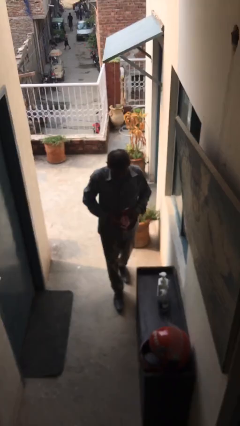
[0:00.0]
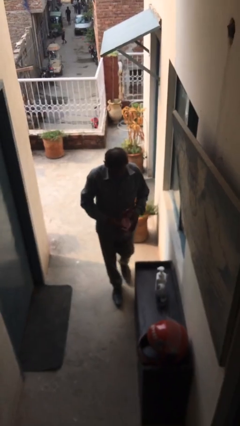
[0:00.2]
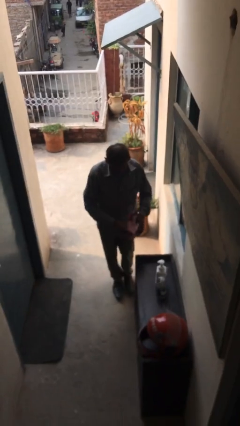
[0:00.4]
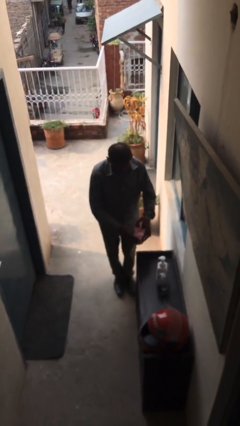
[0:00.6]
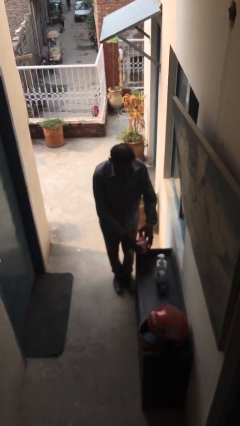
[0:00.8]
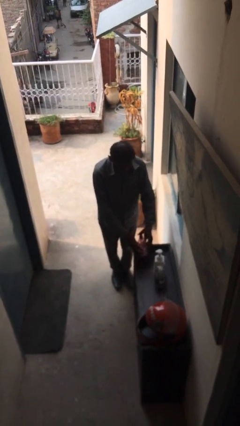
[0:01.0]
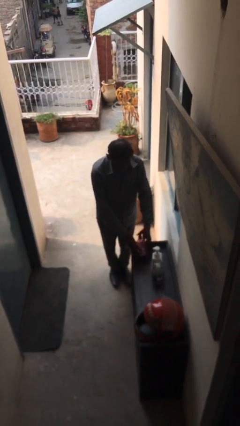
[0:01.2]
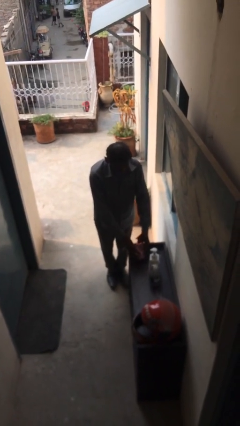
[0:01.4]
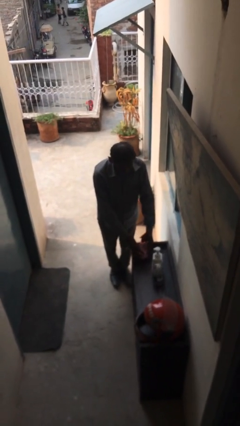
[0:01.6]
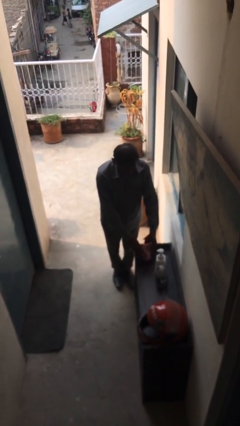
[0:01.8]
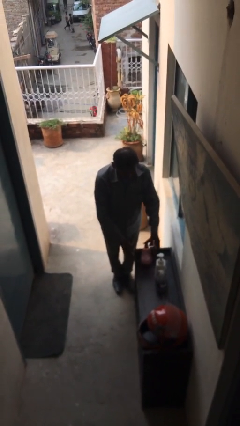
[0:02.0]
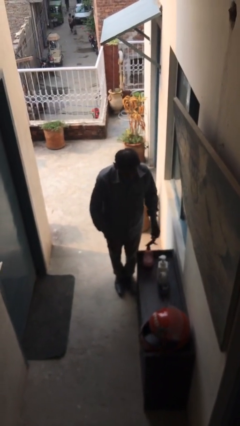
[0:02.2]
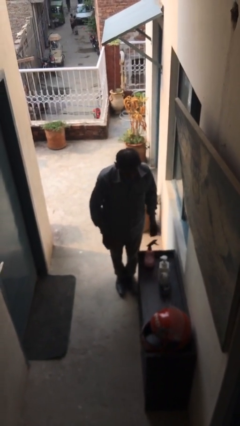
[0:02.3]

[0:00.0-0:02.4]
person puts down object on table

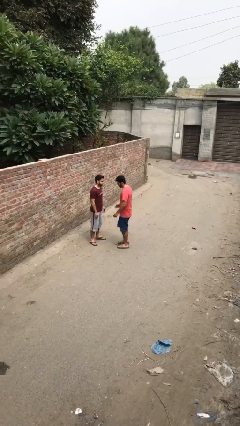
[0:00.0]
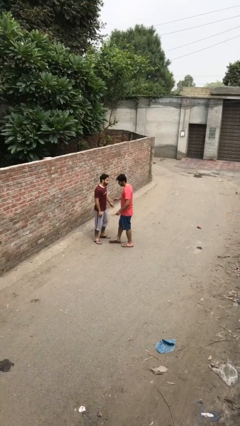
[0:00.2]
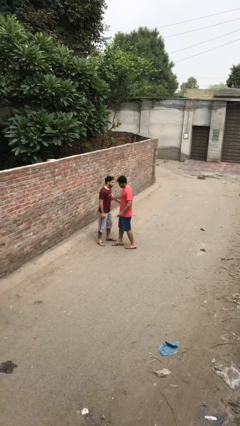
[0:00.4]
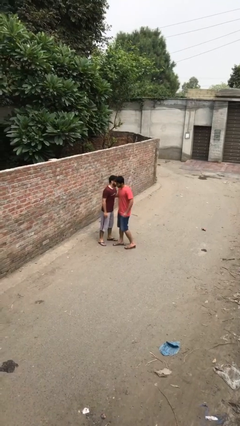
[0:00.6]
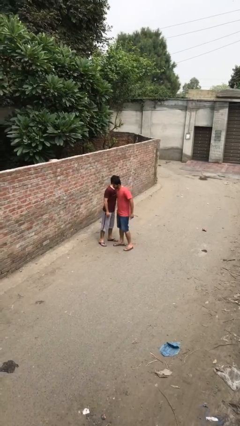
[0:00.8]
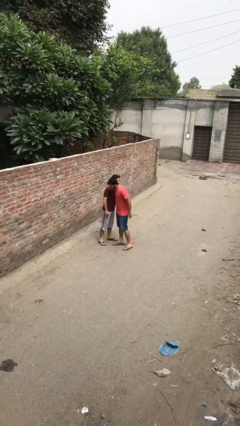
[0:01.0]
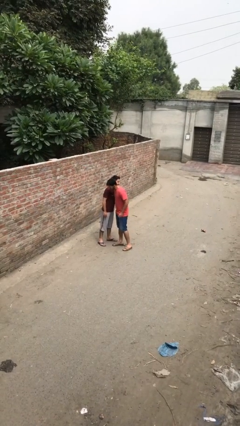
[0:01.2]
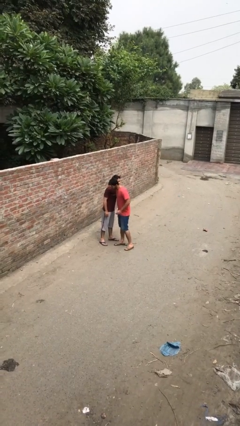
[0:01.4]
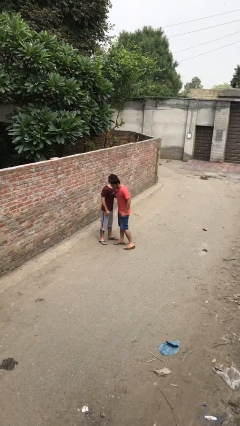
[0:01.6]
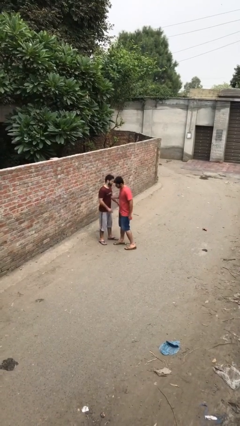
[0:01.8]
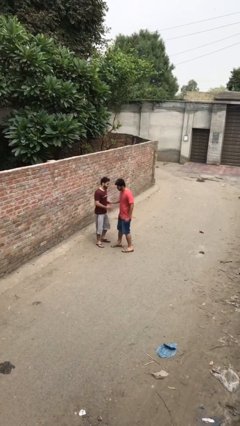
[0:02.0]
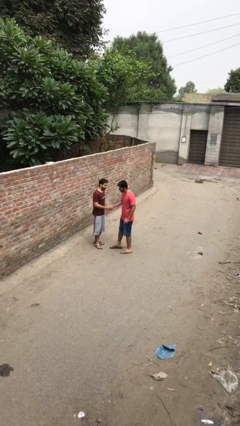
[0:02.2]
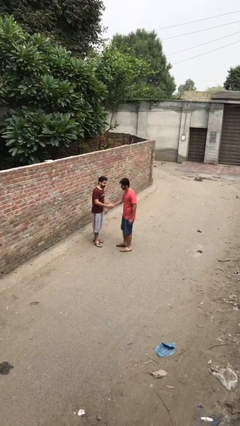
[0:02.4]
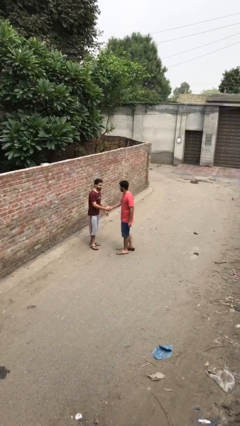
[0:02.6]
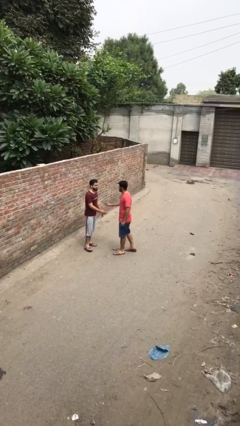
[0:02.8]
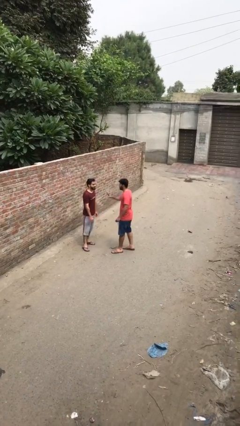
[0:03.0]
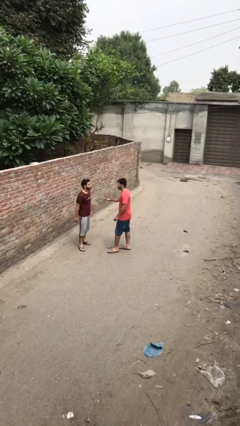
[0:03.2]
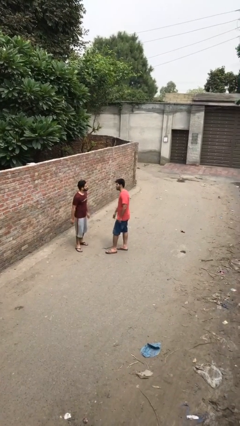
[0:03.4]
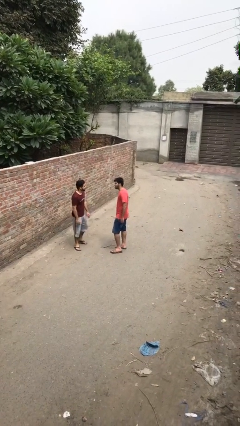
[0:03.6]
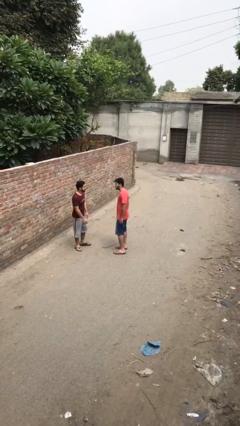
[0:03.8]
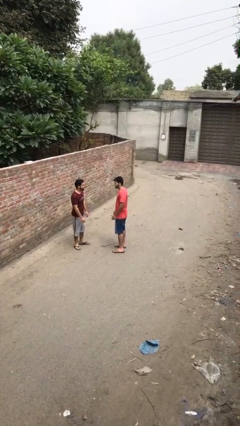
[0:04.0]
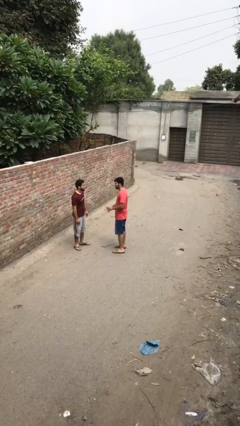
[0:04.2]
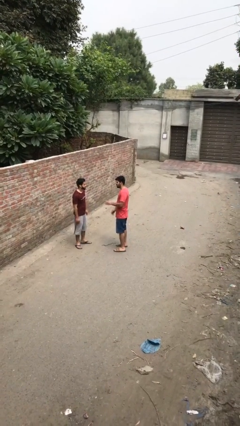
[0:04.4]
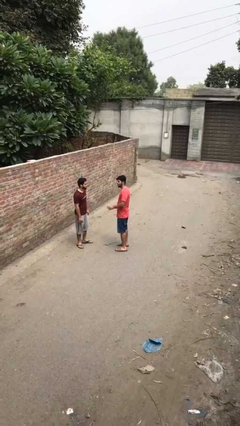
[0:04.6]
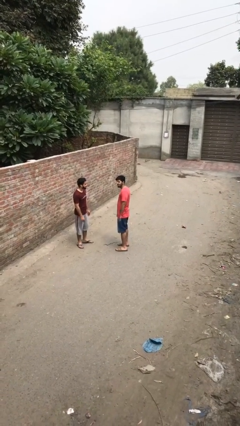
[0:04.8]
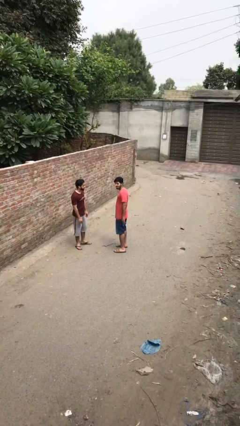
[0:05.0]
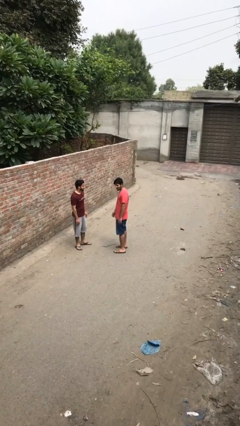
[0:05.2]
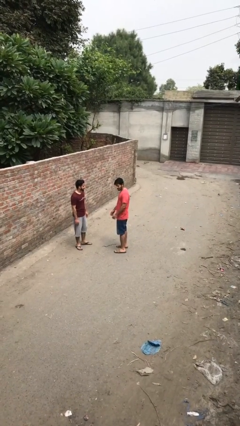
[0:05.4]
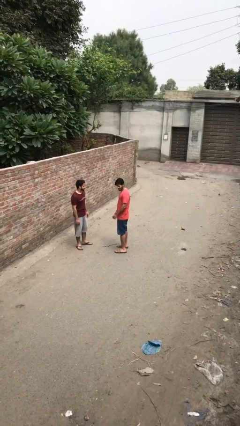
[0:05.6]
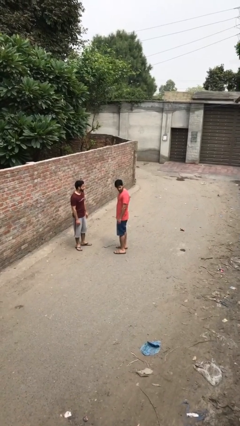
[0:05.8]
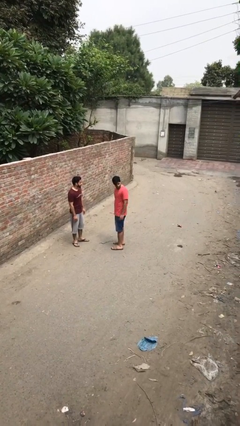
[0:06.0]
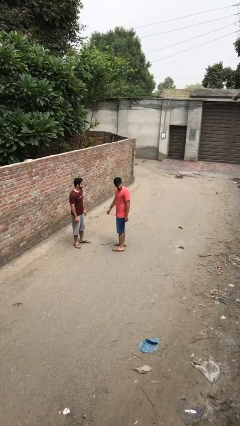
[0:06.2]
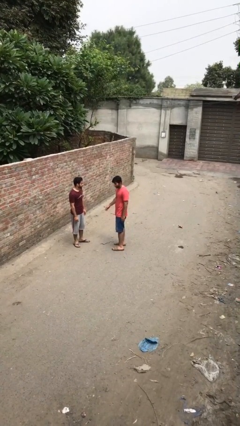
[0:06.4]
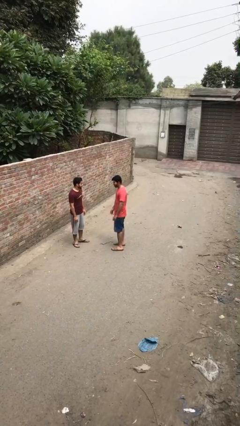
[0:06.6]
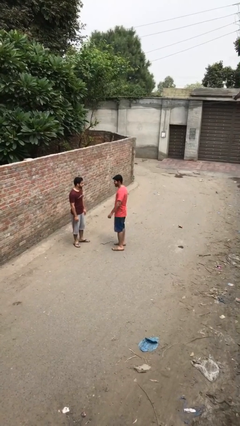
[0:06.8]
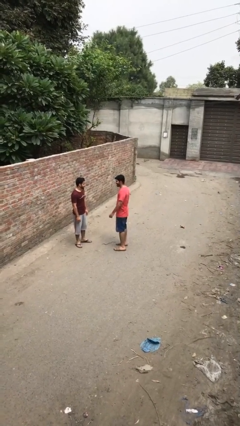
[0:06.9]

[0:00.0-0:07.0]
person embraces person

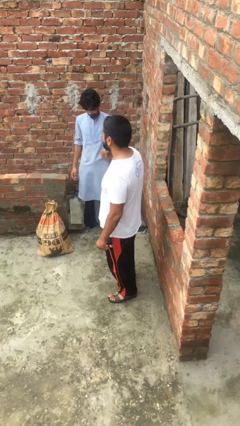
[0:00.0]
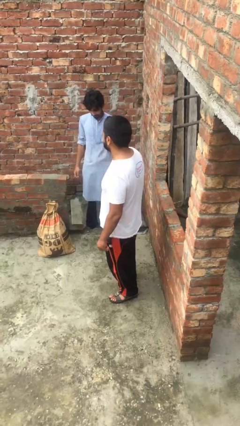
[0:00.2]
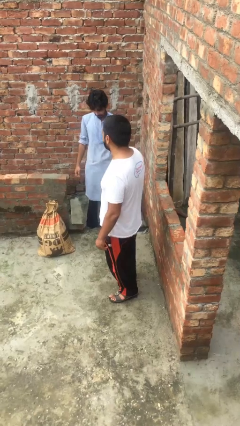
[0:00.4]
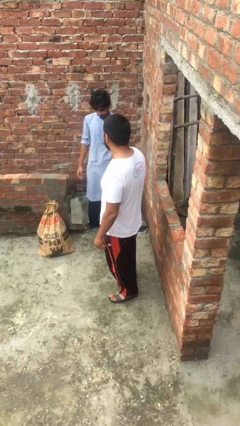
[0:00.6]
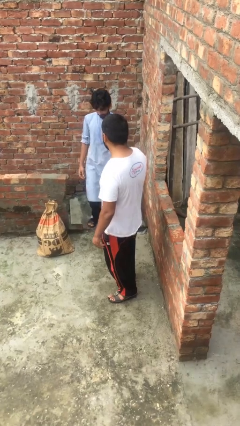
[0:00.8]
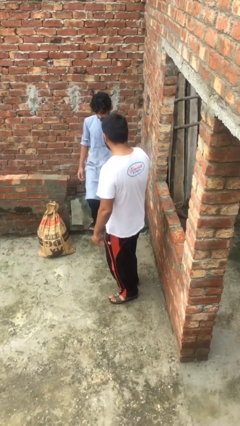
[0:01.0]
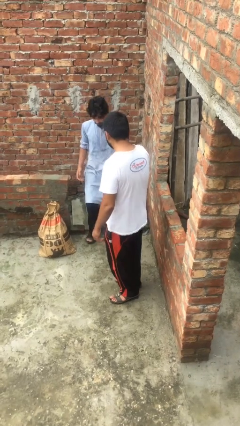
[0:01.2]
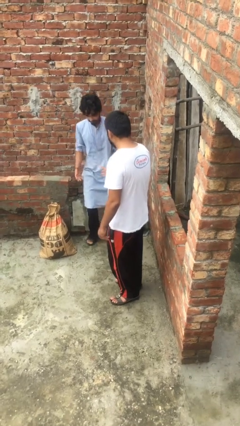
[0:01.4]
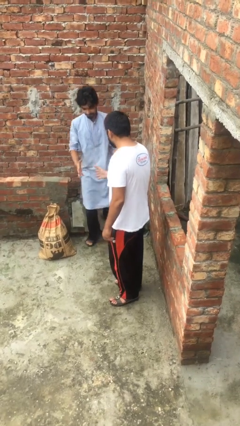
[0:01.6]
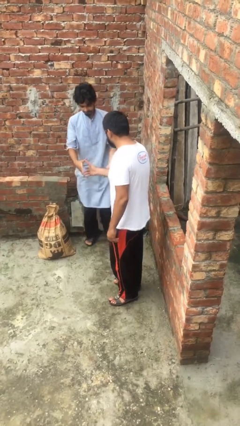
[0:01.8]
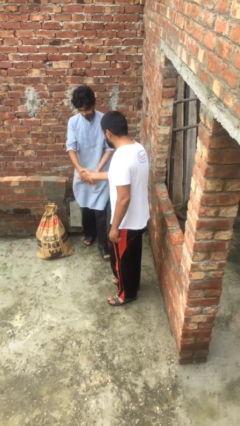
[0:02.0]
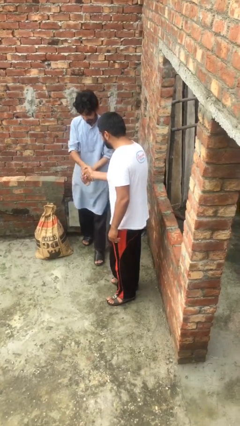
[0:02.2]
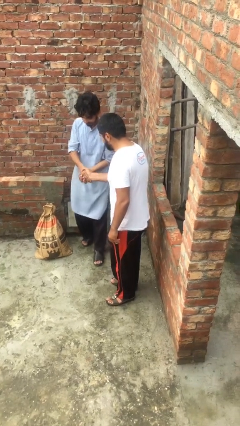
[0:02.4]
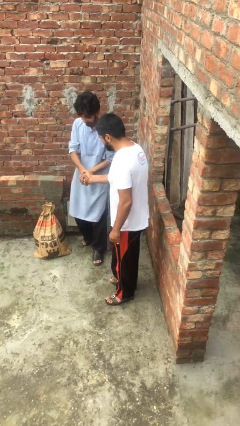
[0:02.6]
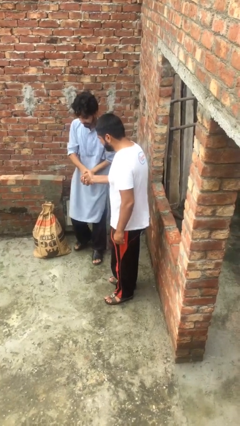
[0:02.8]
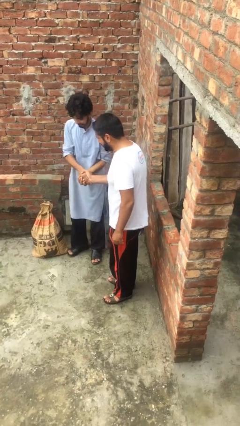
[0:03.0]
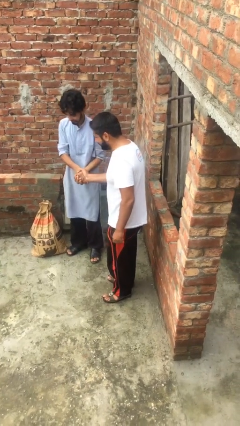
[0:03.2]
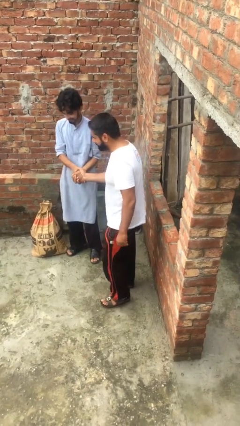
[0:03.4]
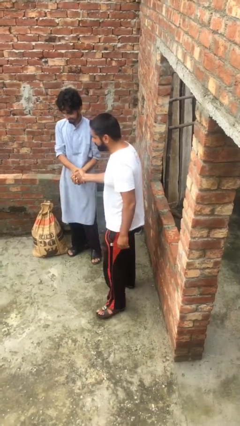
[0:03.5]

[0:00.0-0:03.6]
person shakes hand

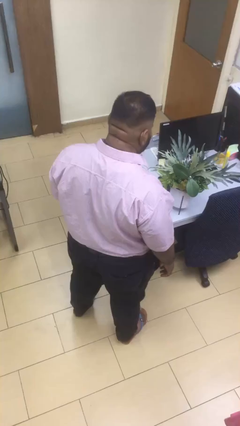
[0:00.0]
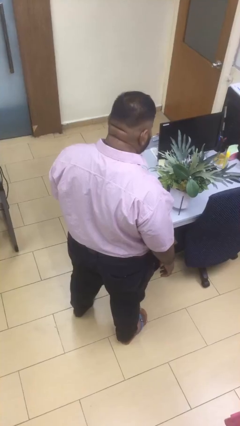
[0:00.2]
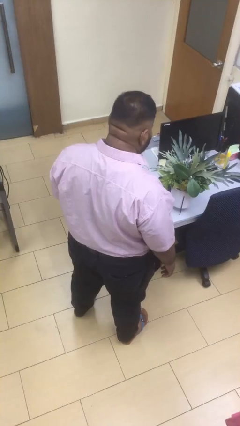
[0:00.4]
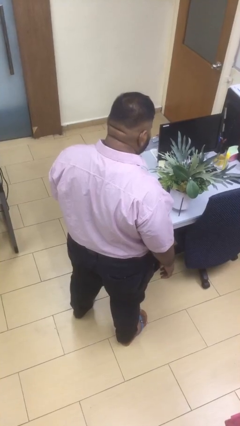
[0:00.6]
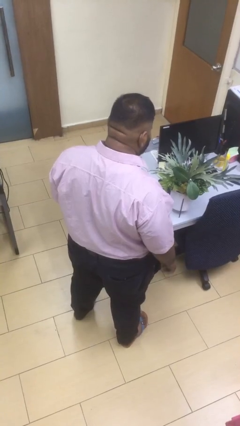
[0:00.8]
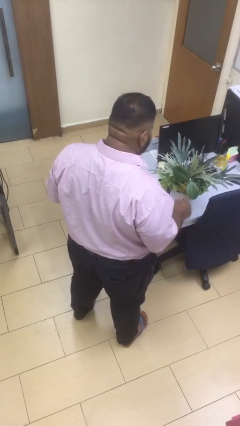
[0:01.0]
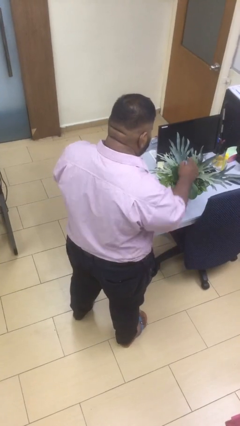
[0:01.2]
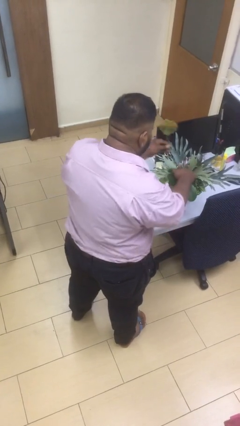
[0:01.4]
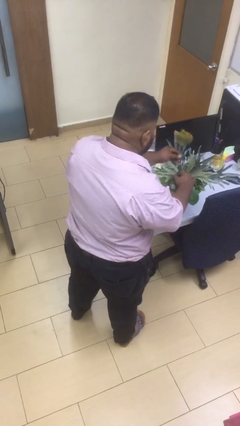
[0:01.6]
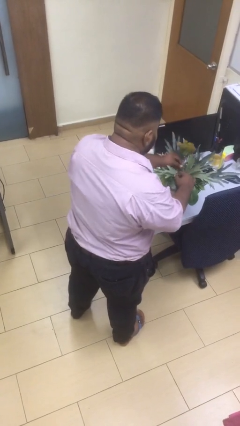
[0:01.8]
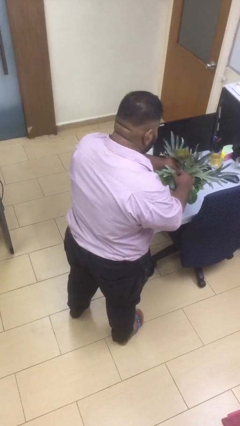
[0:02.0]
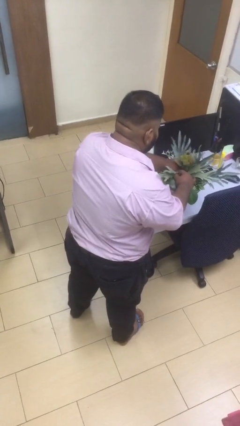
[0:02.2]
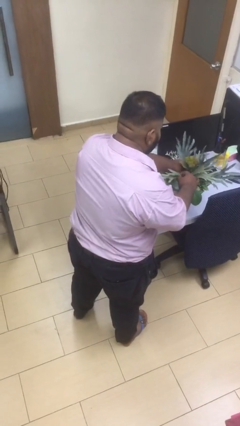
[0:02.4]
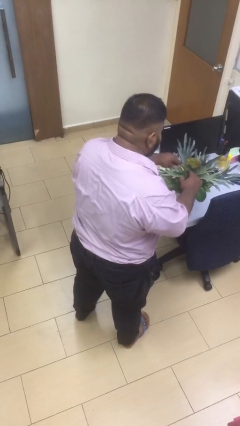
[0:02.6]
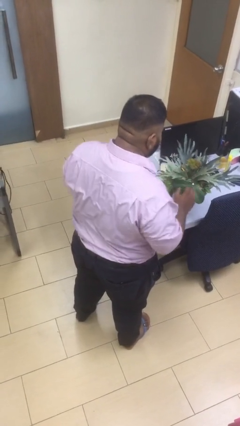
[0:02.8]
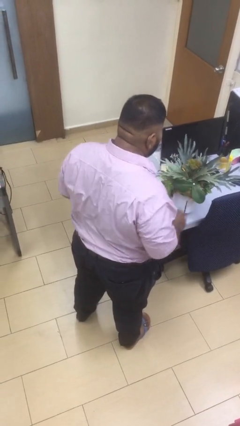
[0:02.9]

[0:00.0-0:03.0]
person arranges flowers in vase

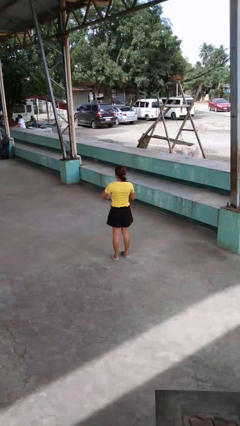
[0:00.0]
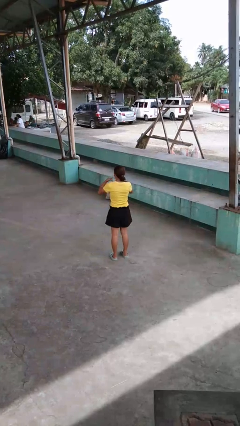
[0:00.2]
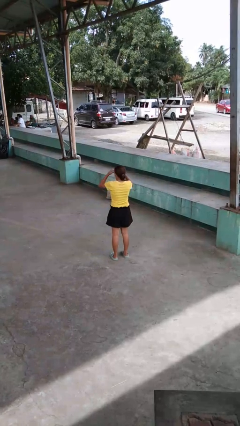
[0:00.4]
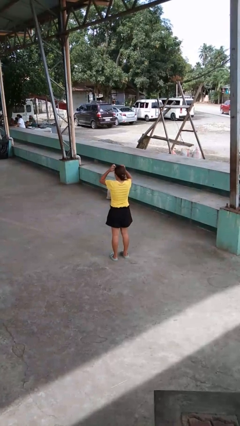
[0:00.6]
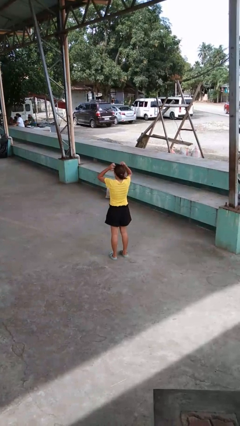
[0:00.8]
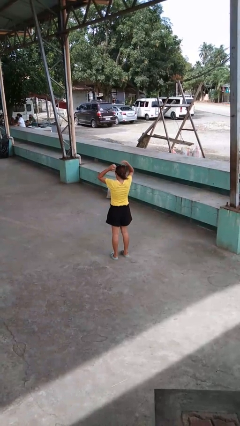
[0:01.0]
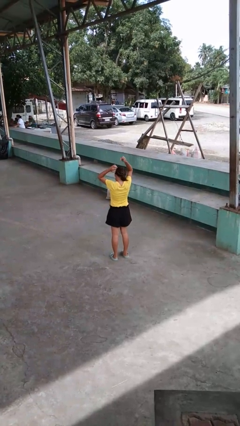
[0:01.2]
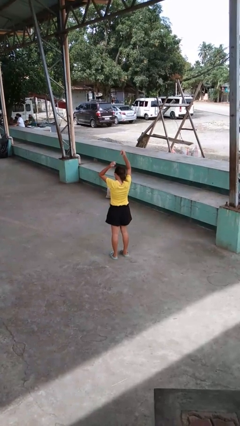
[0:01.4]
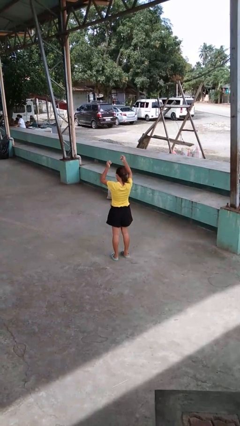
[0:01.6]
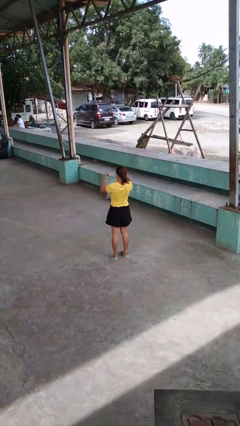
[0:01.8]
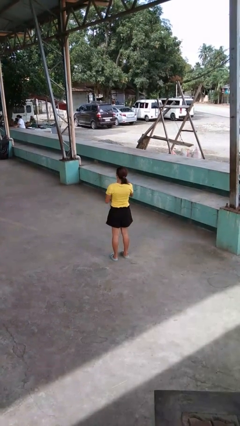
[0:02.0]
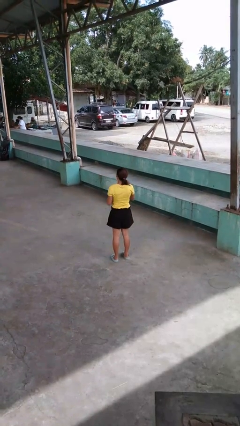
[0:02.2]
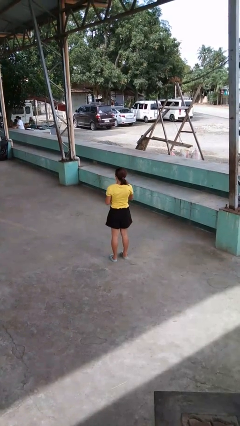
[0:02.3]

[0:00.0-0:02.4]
person takes off necklace
